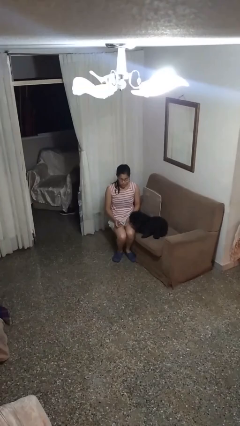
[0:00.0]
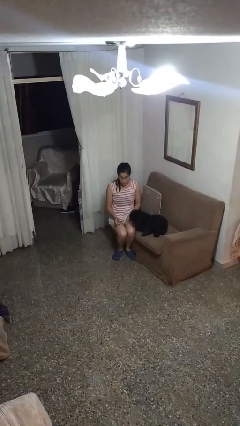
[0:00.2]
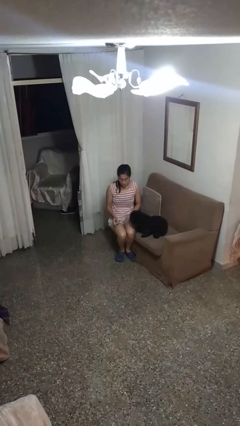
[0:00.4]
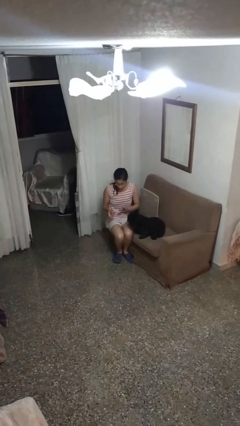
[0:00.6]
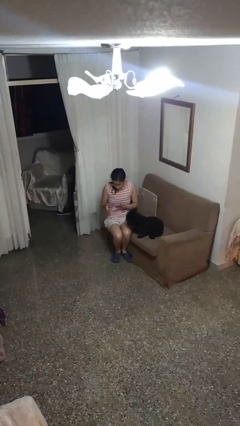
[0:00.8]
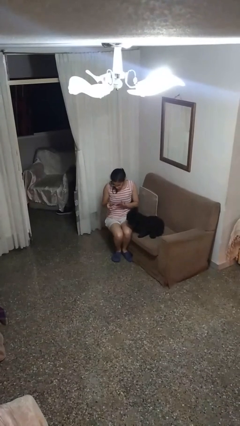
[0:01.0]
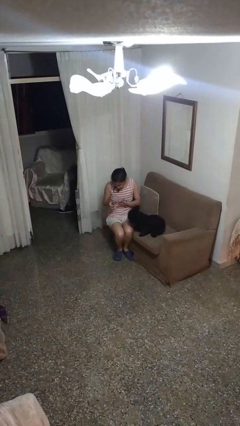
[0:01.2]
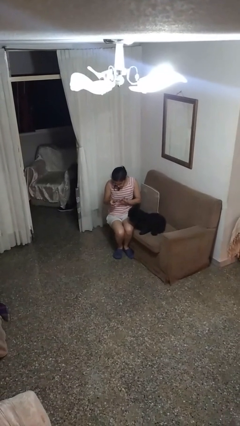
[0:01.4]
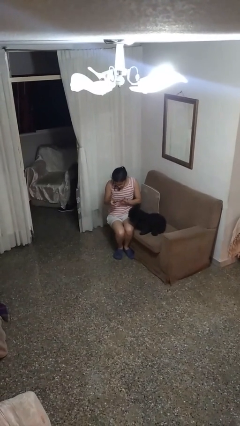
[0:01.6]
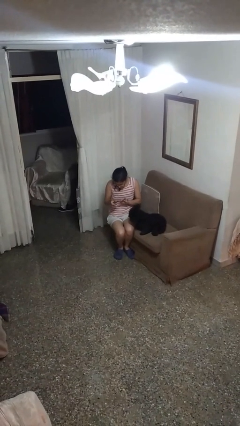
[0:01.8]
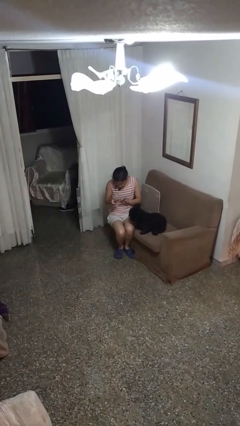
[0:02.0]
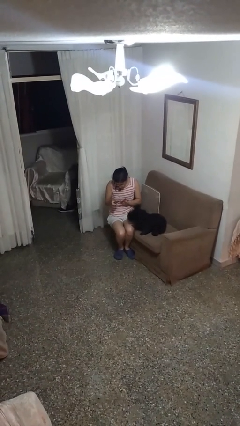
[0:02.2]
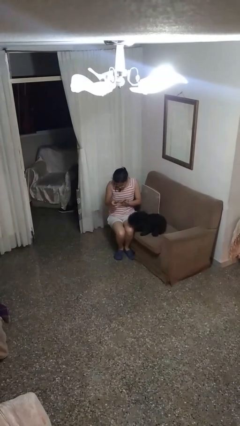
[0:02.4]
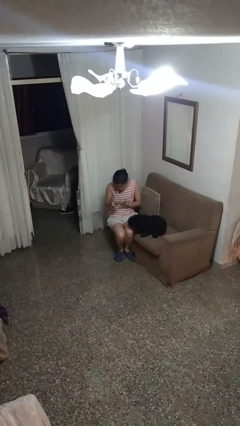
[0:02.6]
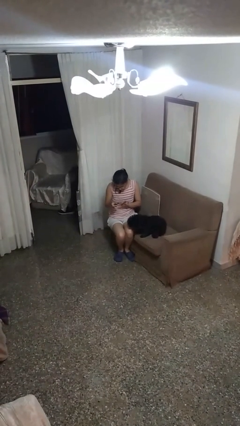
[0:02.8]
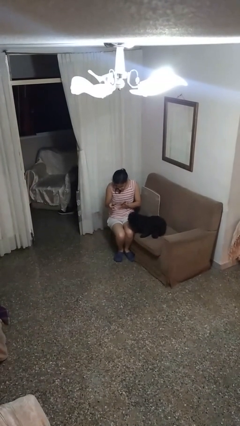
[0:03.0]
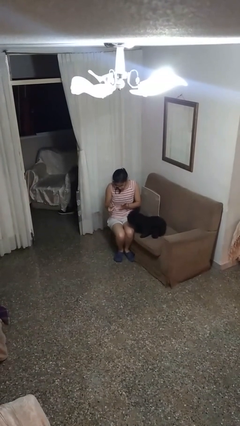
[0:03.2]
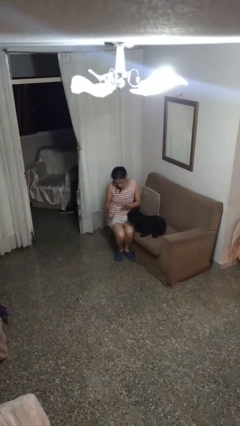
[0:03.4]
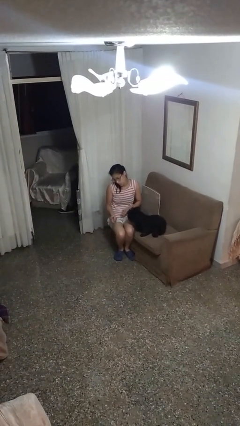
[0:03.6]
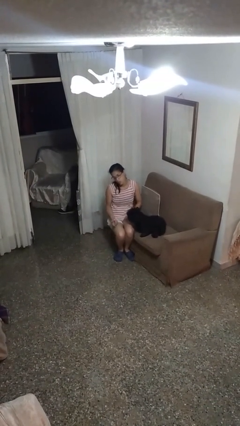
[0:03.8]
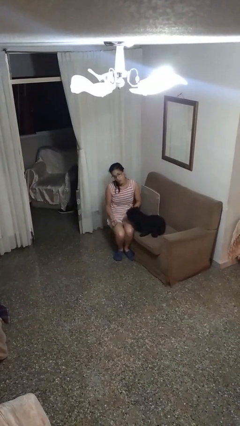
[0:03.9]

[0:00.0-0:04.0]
person clips fingernails

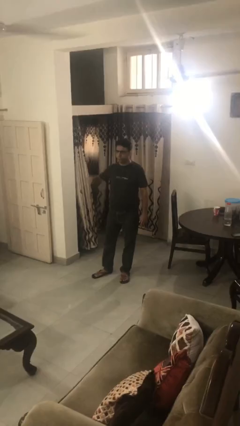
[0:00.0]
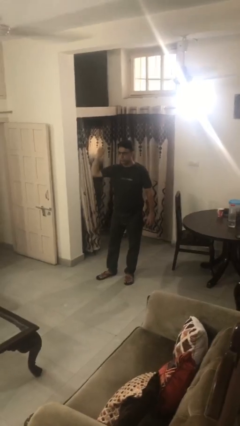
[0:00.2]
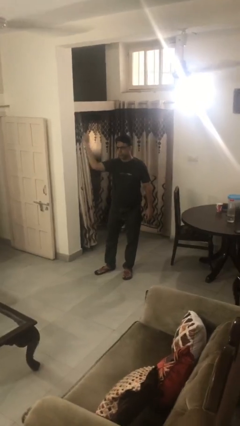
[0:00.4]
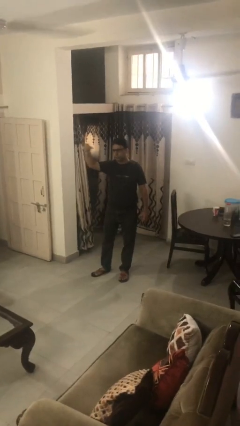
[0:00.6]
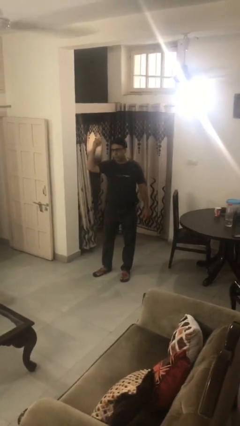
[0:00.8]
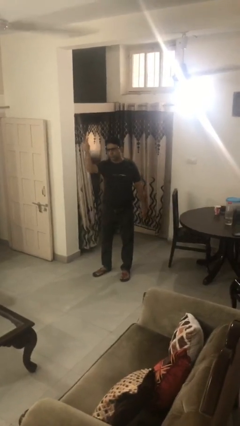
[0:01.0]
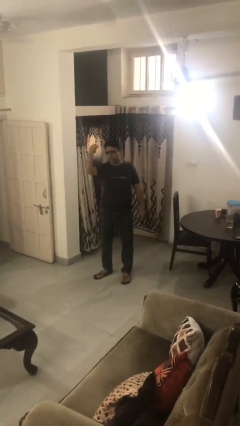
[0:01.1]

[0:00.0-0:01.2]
person snaps fingers

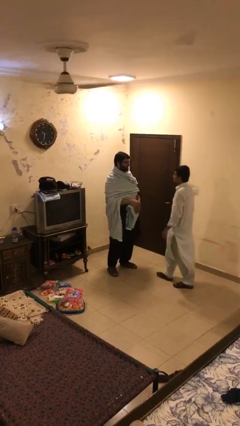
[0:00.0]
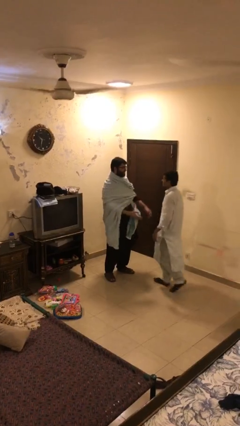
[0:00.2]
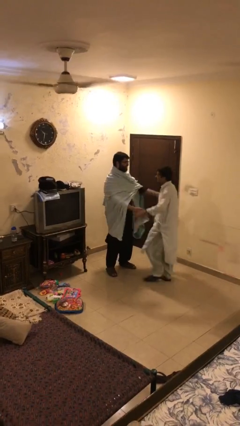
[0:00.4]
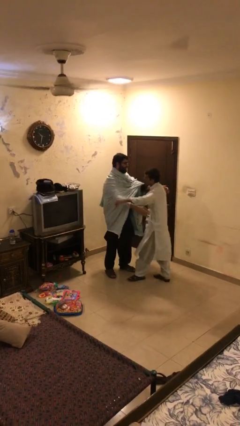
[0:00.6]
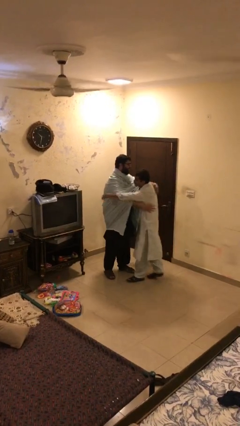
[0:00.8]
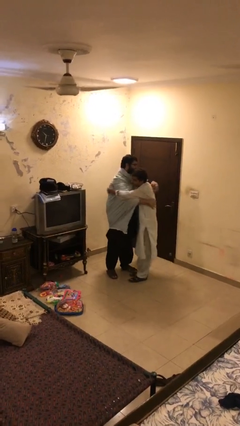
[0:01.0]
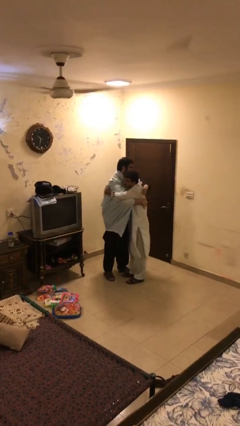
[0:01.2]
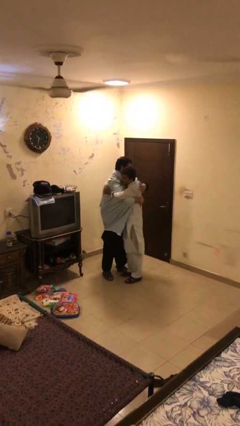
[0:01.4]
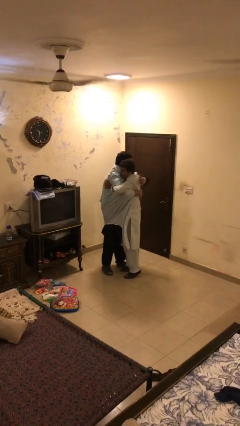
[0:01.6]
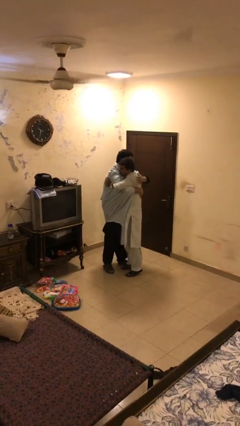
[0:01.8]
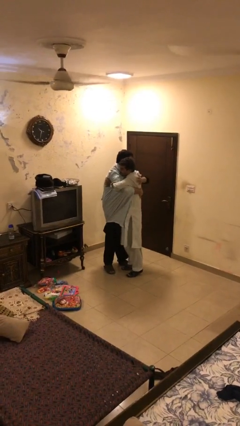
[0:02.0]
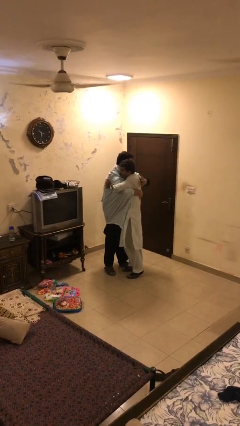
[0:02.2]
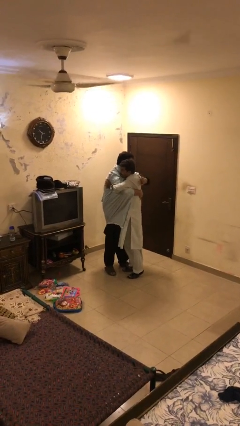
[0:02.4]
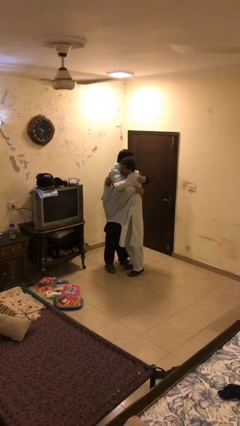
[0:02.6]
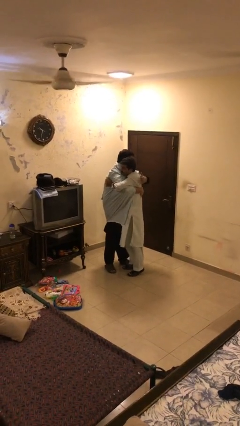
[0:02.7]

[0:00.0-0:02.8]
person embraces person

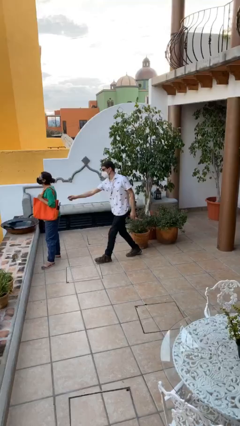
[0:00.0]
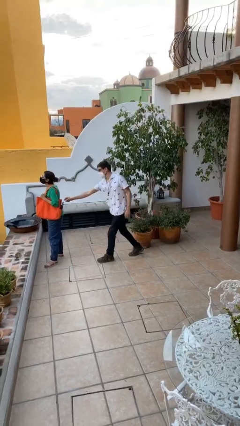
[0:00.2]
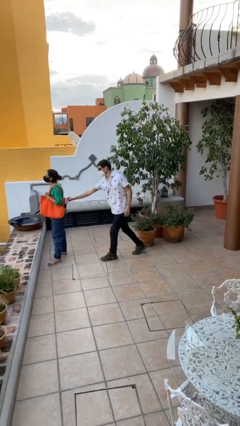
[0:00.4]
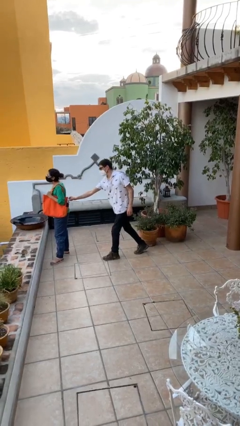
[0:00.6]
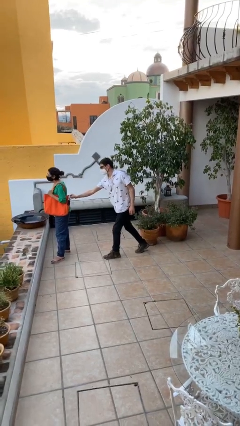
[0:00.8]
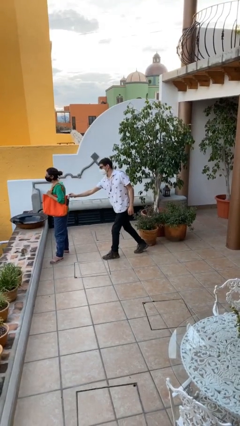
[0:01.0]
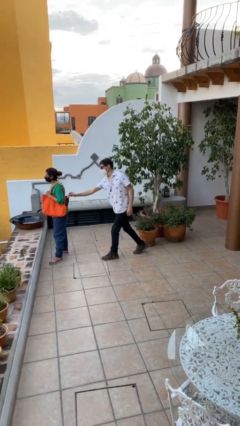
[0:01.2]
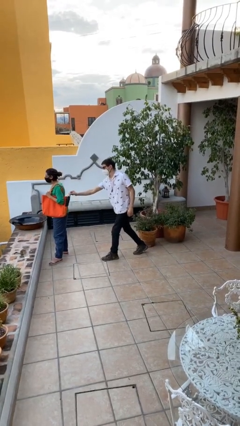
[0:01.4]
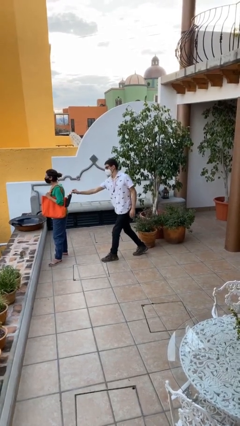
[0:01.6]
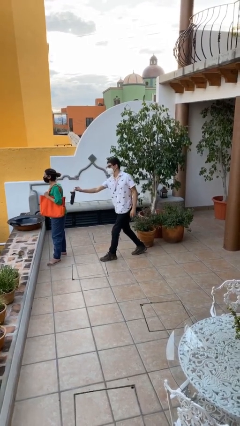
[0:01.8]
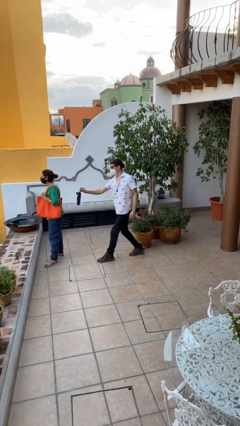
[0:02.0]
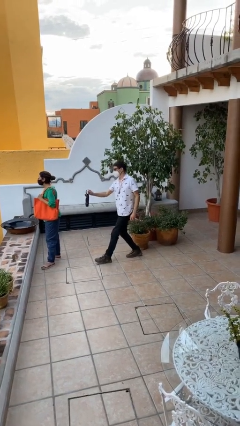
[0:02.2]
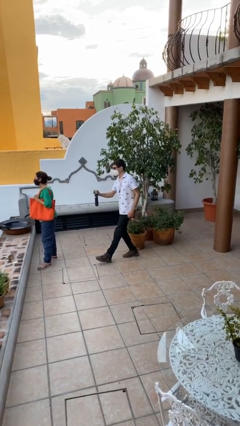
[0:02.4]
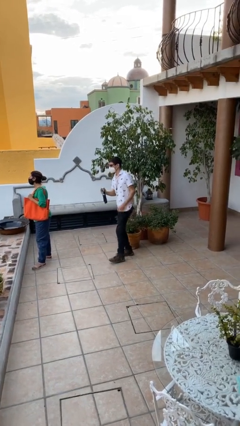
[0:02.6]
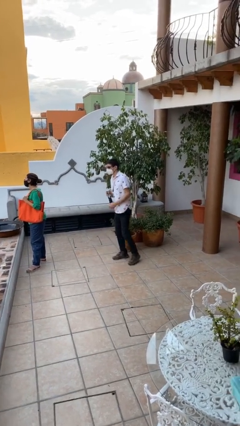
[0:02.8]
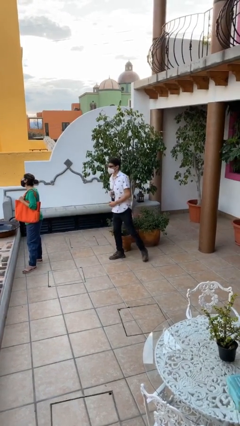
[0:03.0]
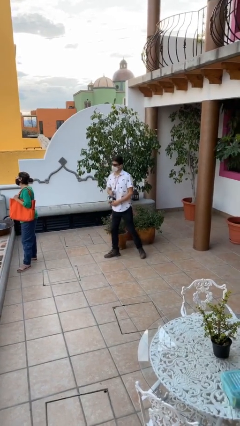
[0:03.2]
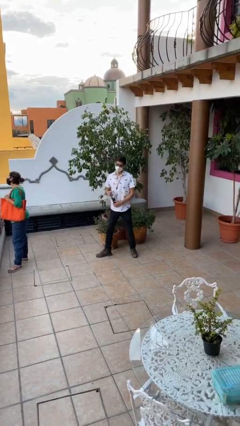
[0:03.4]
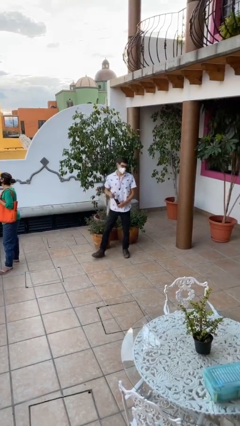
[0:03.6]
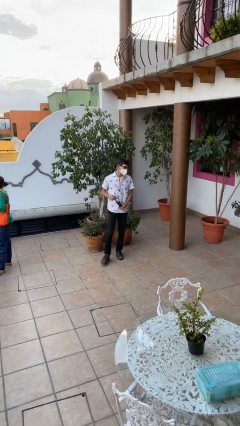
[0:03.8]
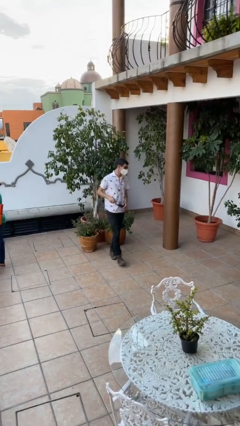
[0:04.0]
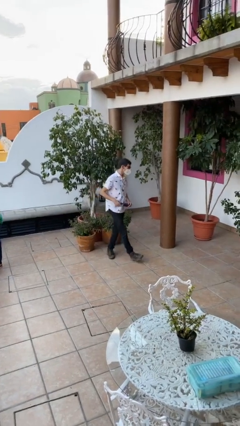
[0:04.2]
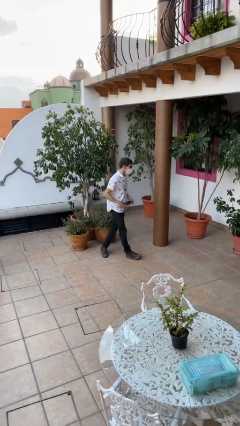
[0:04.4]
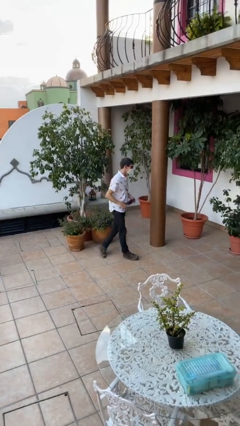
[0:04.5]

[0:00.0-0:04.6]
person steals object from person

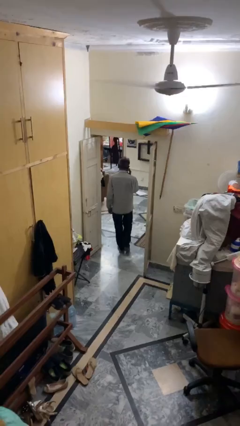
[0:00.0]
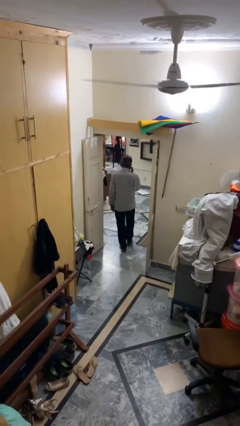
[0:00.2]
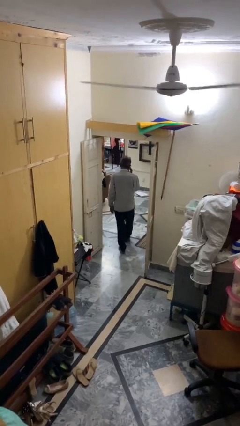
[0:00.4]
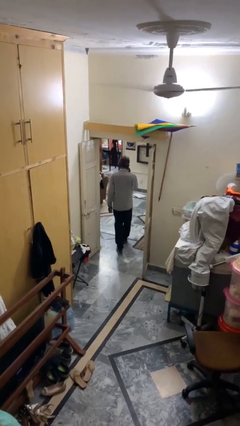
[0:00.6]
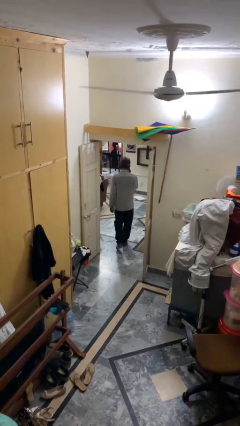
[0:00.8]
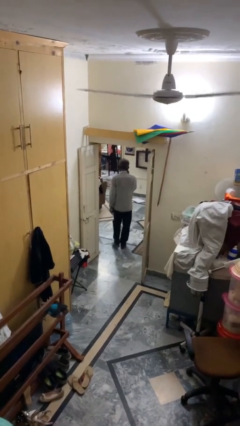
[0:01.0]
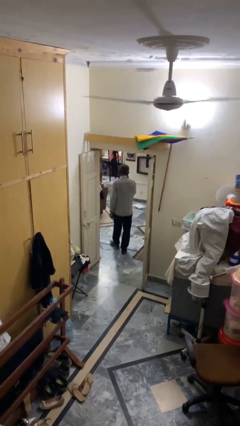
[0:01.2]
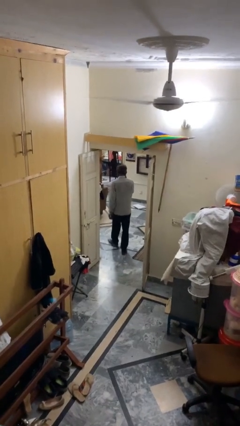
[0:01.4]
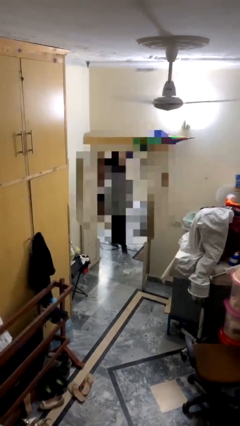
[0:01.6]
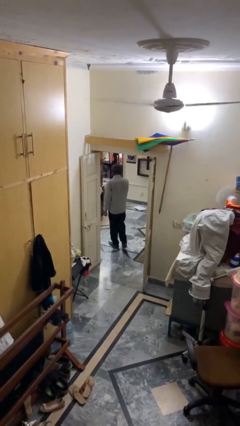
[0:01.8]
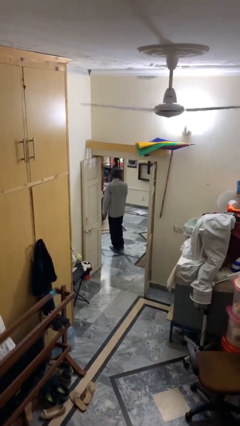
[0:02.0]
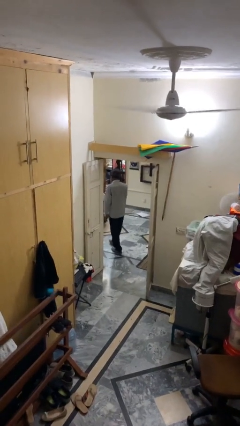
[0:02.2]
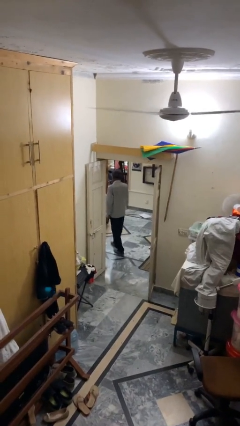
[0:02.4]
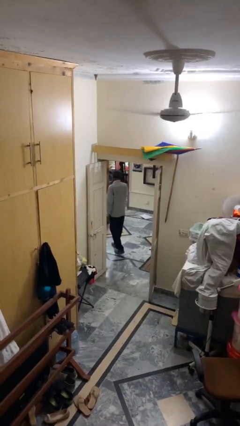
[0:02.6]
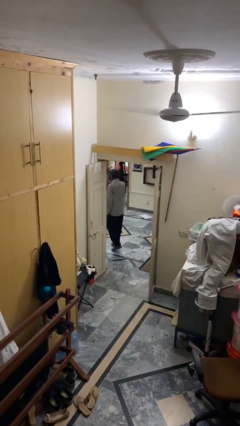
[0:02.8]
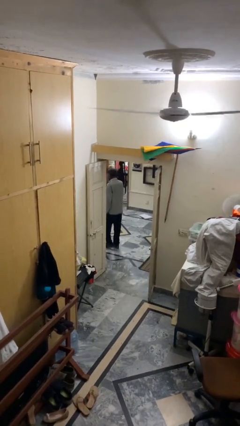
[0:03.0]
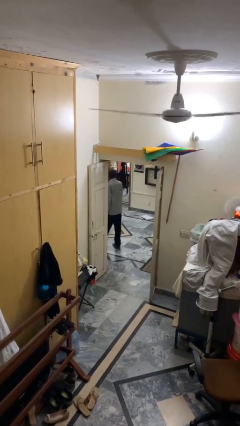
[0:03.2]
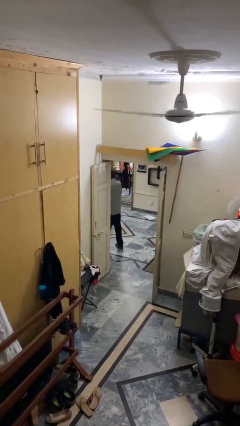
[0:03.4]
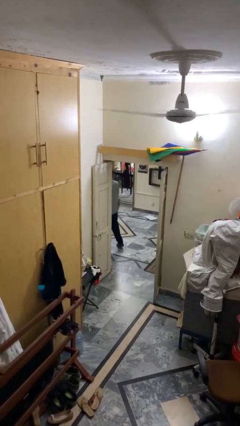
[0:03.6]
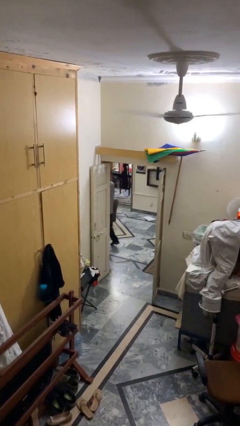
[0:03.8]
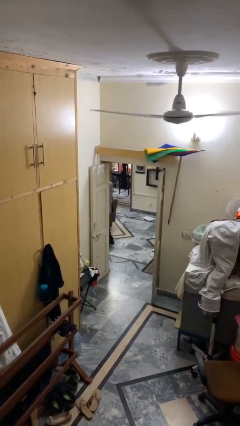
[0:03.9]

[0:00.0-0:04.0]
person exits scene through structure

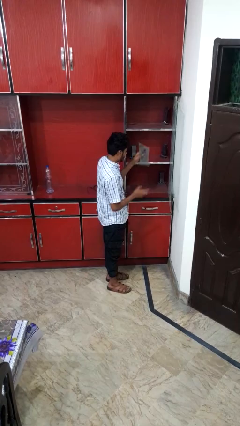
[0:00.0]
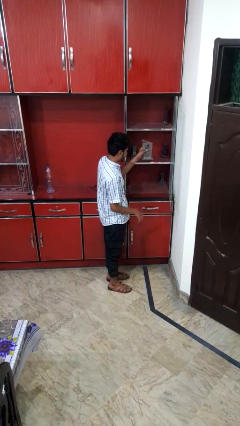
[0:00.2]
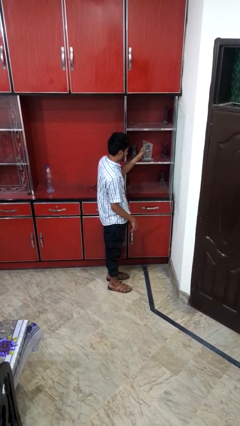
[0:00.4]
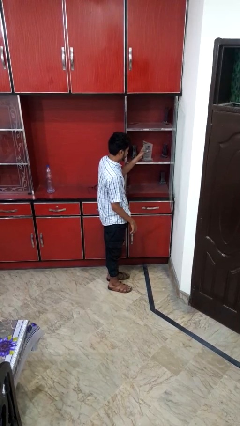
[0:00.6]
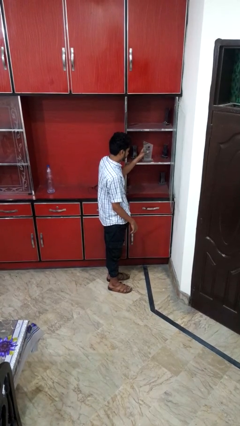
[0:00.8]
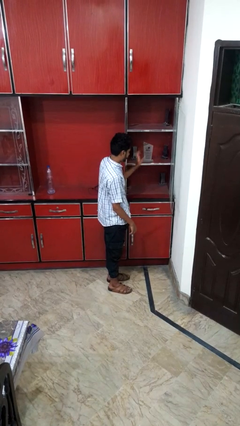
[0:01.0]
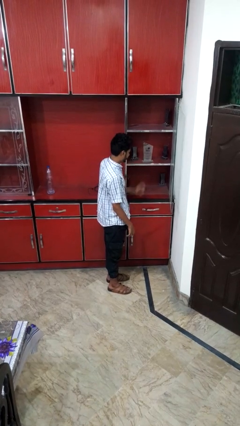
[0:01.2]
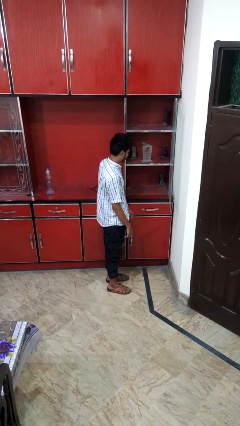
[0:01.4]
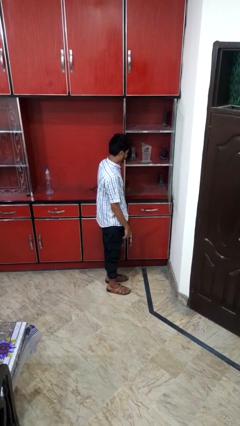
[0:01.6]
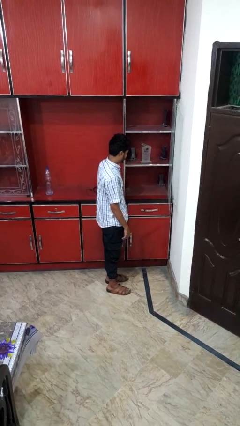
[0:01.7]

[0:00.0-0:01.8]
person puts down object into cabinet
